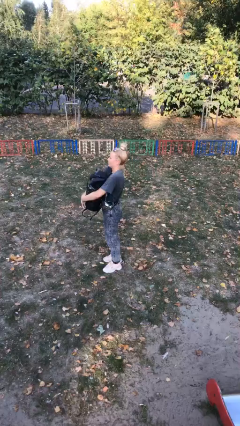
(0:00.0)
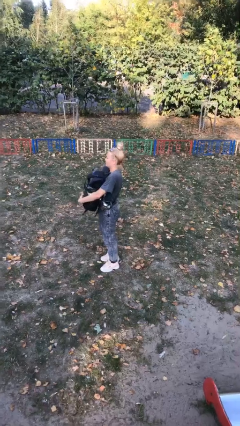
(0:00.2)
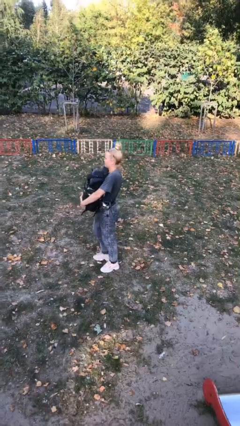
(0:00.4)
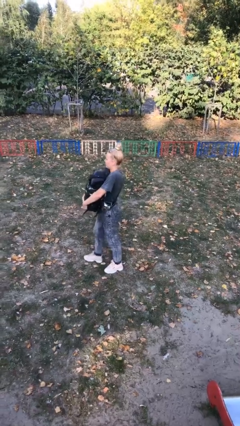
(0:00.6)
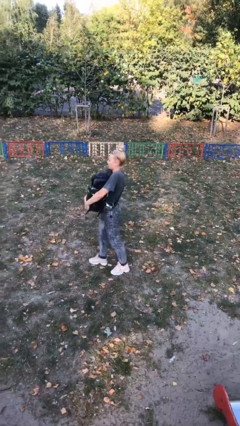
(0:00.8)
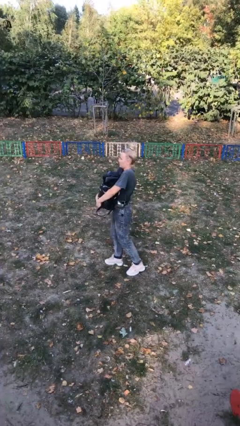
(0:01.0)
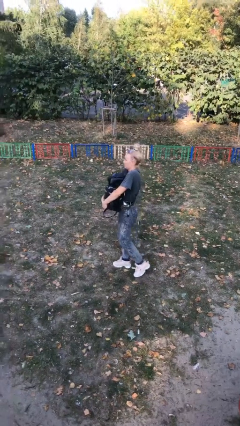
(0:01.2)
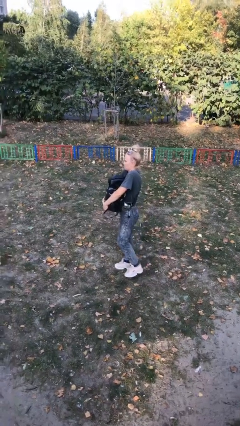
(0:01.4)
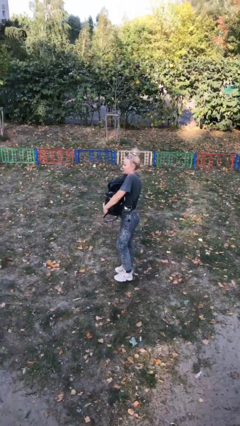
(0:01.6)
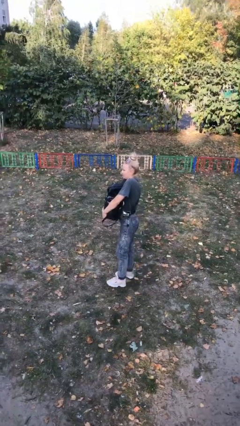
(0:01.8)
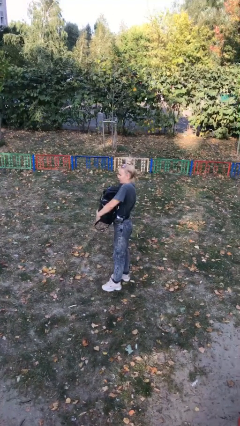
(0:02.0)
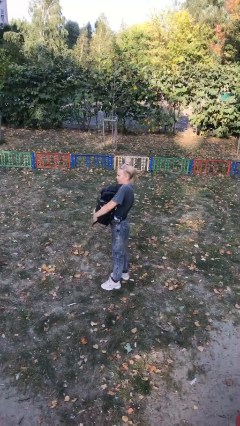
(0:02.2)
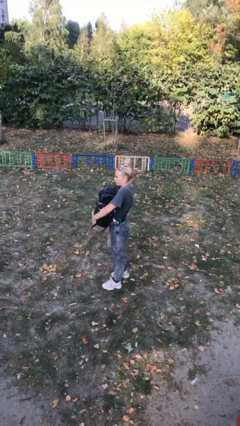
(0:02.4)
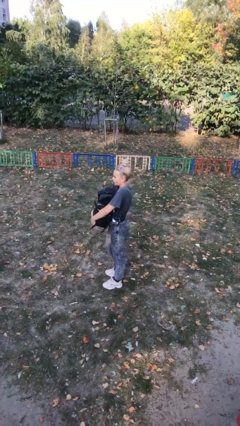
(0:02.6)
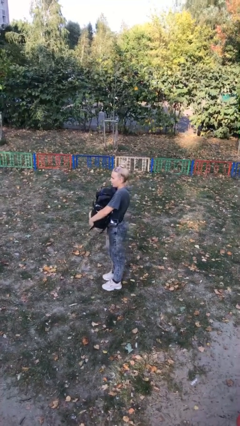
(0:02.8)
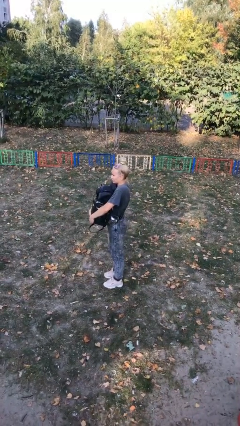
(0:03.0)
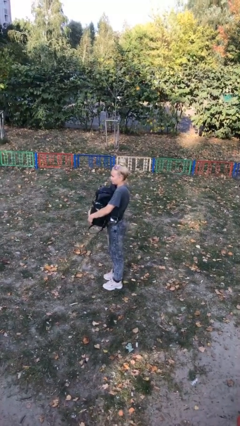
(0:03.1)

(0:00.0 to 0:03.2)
person carries heavy object

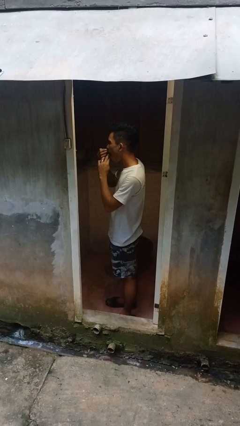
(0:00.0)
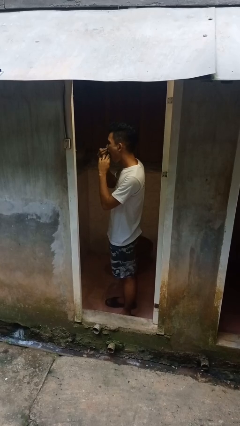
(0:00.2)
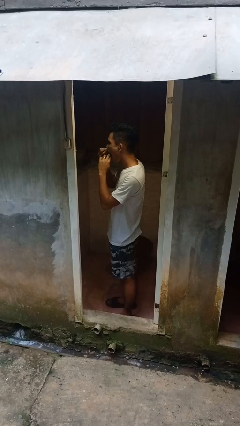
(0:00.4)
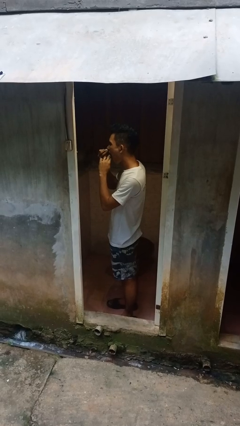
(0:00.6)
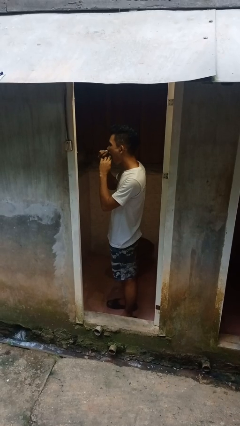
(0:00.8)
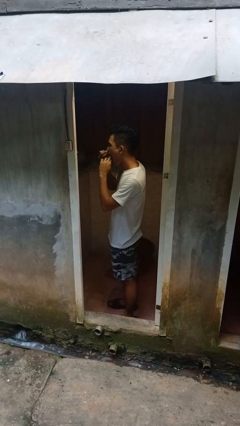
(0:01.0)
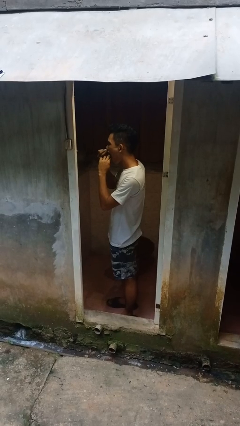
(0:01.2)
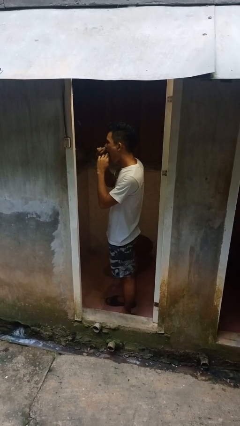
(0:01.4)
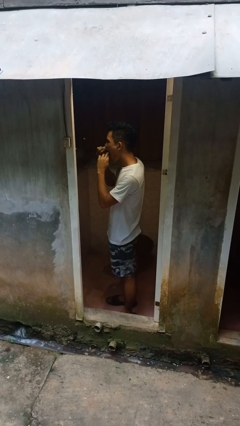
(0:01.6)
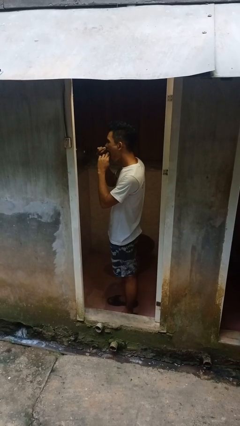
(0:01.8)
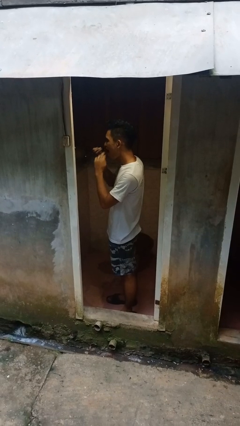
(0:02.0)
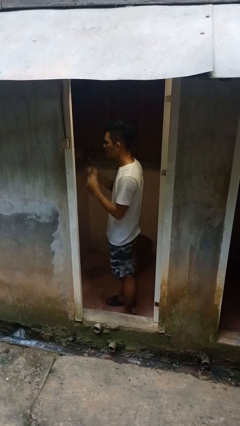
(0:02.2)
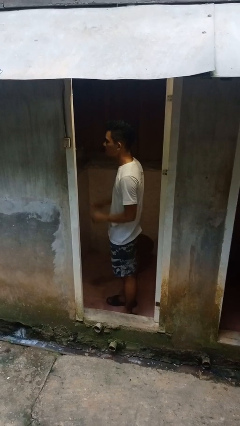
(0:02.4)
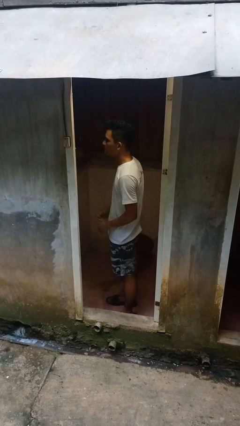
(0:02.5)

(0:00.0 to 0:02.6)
person flosses

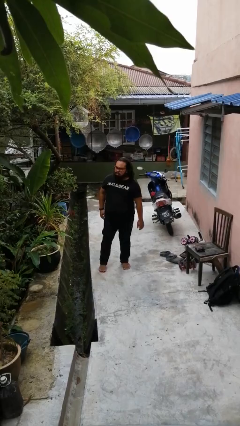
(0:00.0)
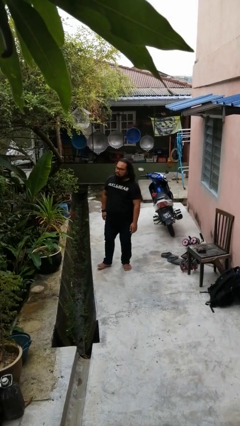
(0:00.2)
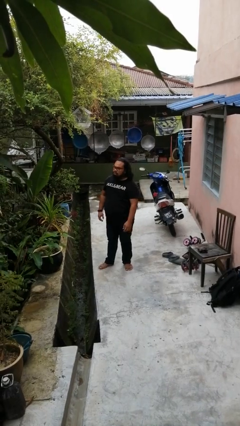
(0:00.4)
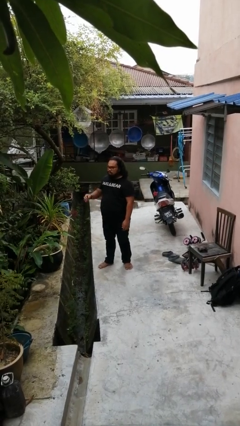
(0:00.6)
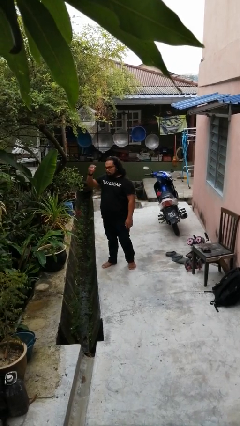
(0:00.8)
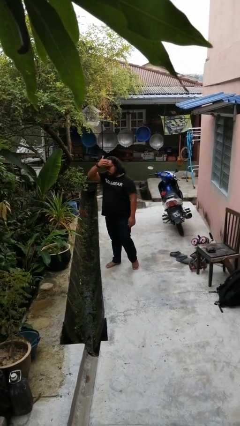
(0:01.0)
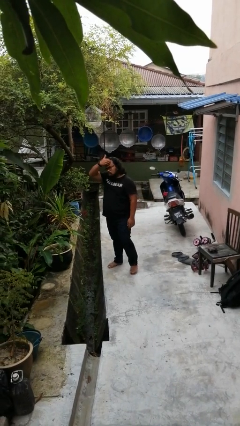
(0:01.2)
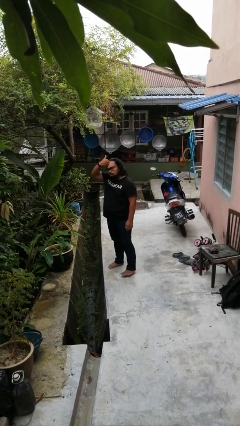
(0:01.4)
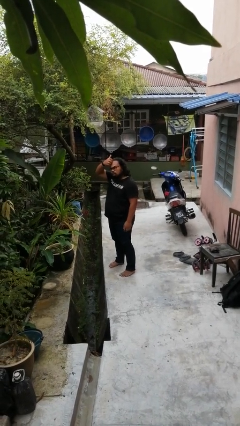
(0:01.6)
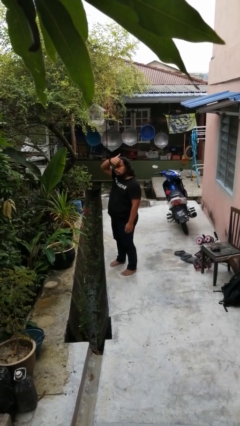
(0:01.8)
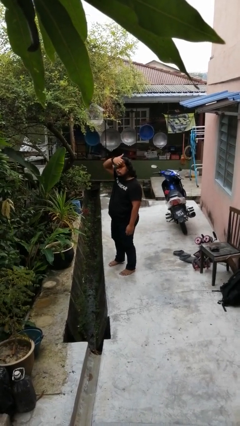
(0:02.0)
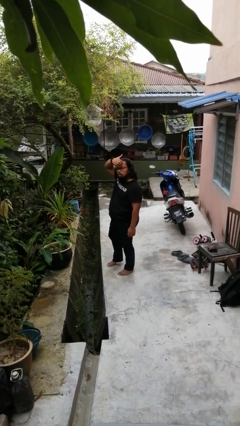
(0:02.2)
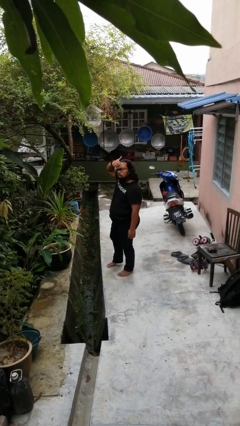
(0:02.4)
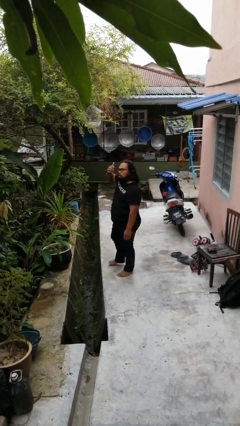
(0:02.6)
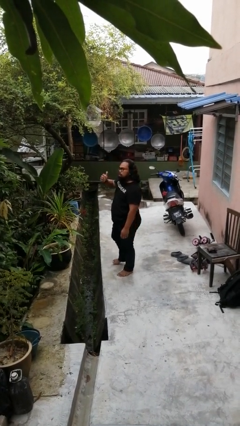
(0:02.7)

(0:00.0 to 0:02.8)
person scratches face

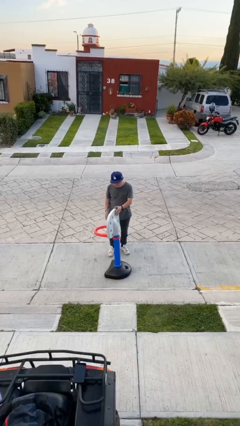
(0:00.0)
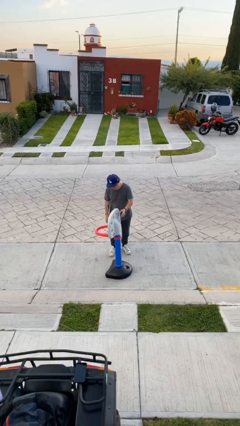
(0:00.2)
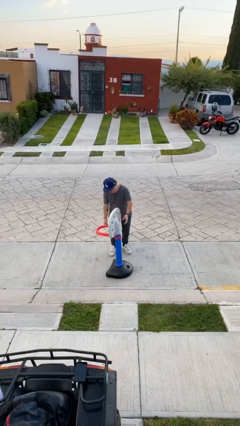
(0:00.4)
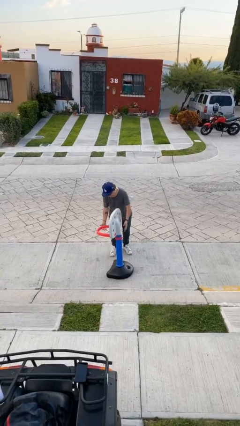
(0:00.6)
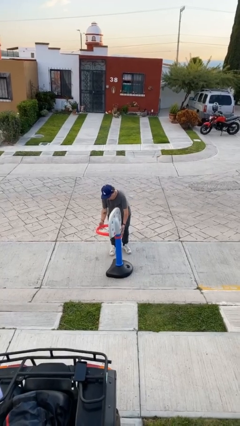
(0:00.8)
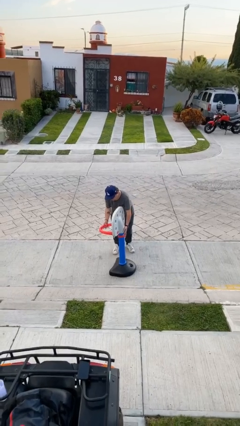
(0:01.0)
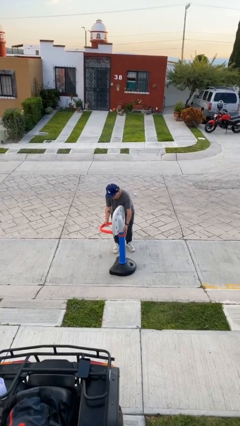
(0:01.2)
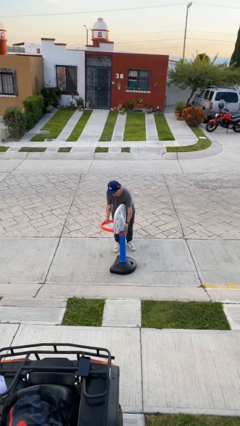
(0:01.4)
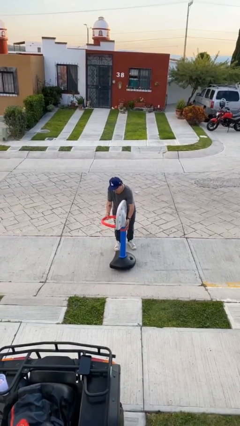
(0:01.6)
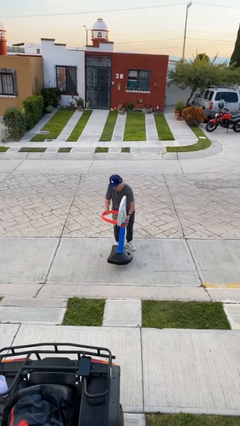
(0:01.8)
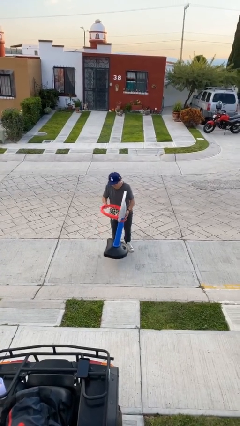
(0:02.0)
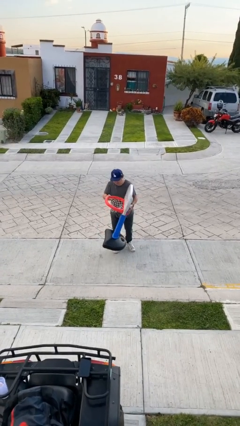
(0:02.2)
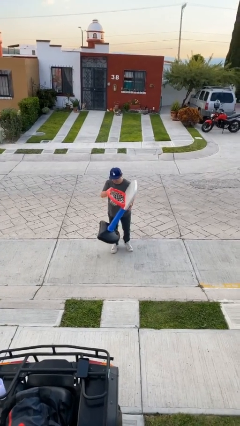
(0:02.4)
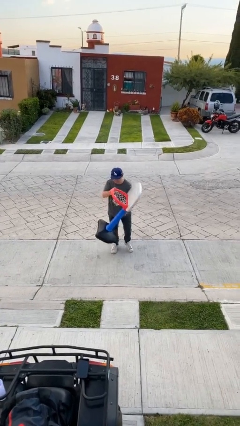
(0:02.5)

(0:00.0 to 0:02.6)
person picks up object from floor

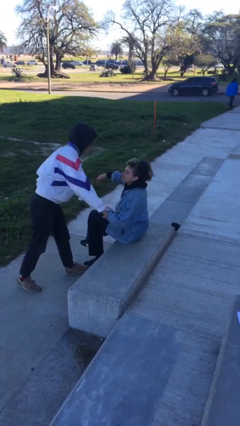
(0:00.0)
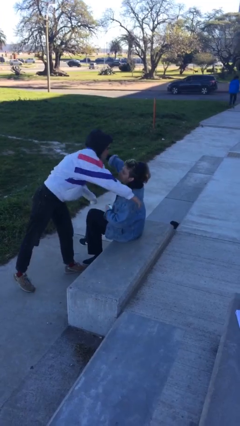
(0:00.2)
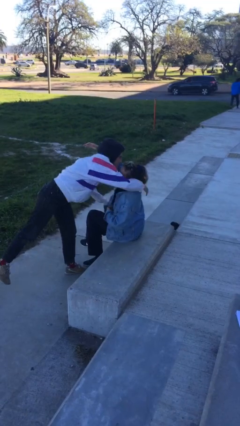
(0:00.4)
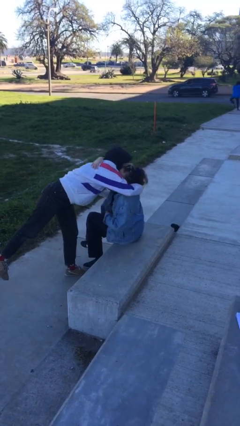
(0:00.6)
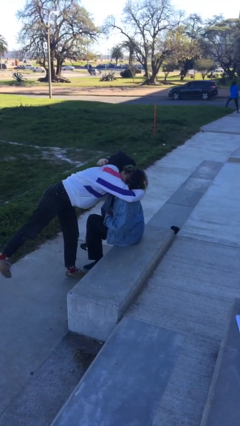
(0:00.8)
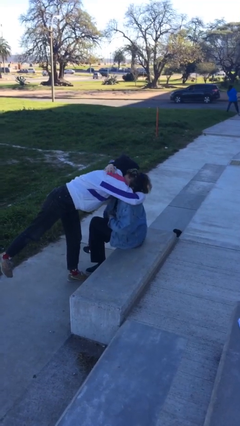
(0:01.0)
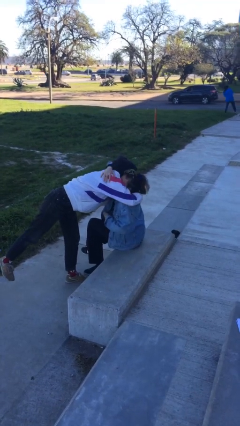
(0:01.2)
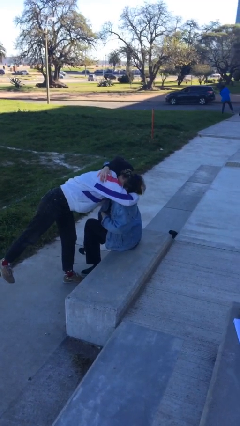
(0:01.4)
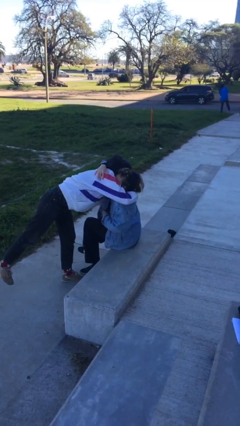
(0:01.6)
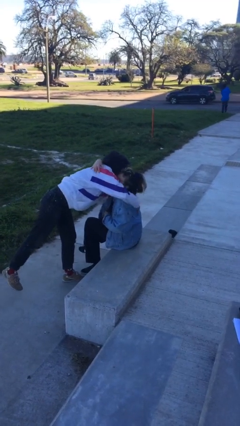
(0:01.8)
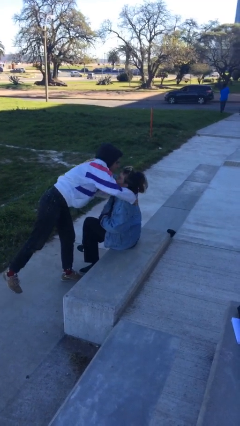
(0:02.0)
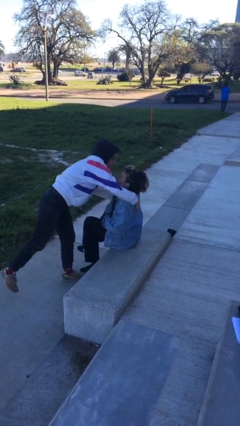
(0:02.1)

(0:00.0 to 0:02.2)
person embraces person

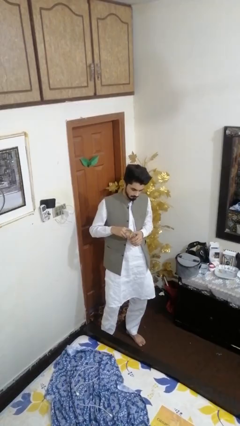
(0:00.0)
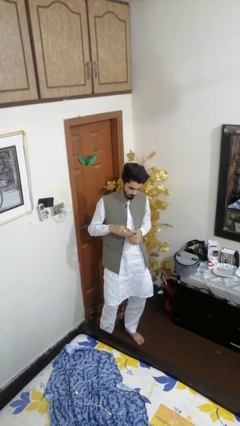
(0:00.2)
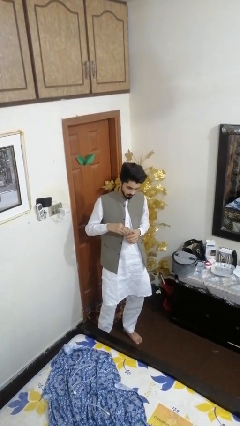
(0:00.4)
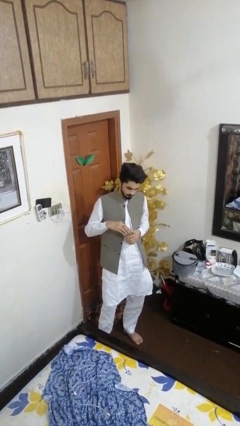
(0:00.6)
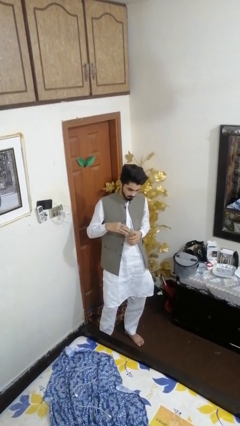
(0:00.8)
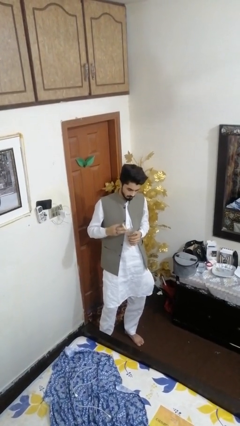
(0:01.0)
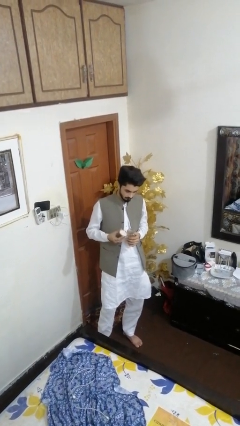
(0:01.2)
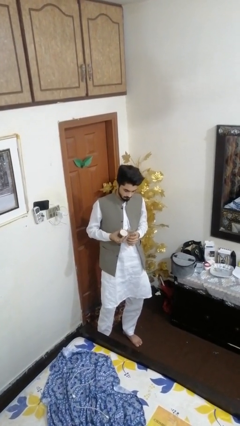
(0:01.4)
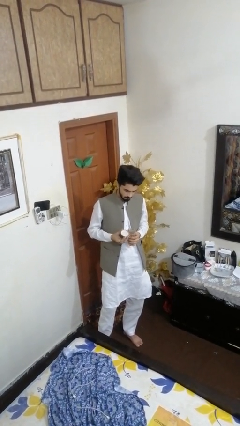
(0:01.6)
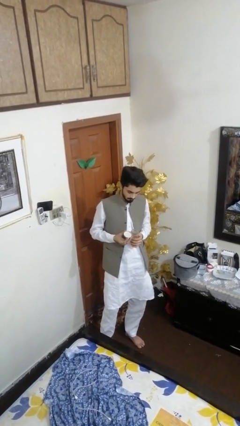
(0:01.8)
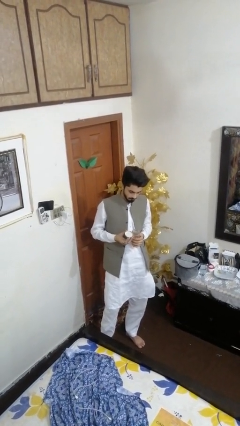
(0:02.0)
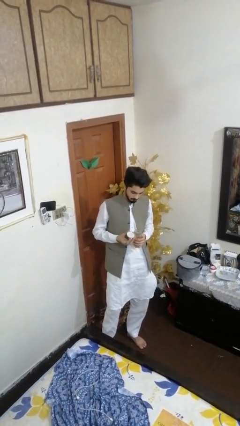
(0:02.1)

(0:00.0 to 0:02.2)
person opens jar

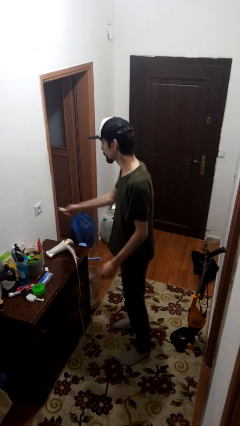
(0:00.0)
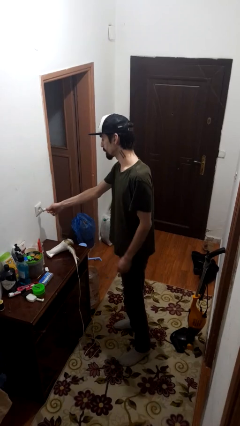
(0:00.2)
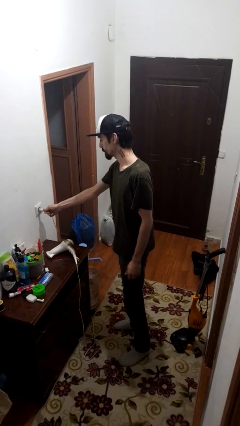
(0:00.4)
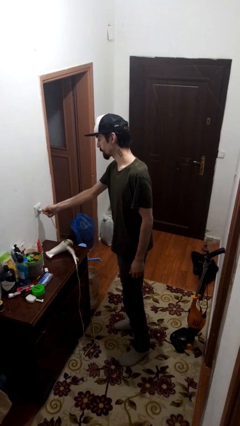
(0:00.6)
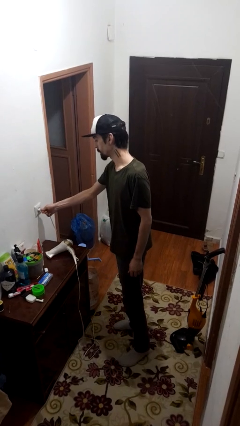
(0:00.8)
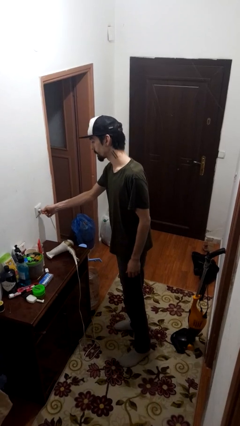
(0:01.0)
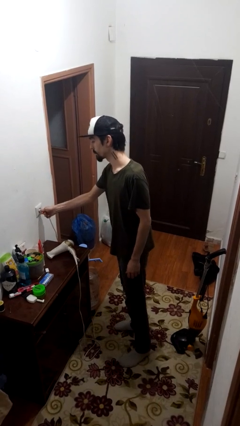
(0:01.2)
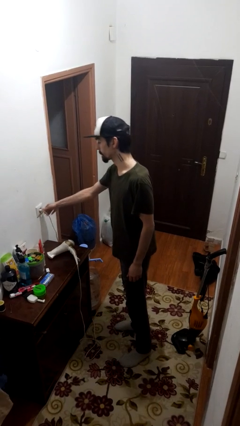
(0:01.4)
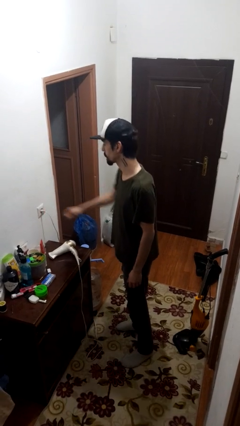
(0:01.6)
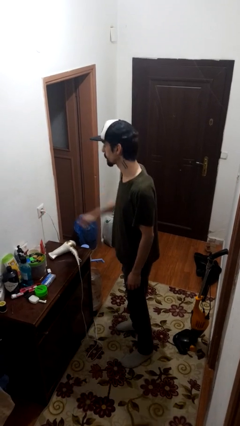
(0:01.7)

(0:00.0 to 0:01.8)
person plugs into electrical socket
